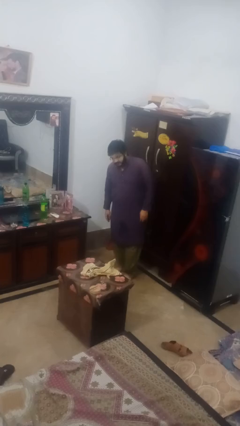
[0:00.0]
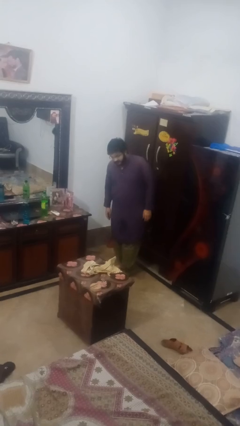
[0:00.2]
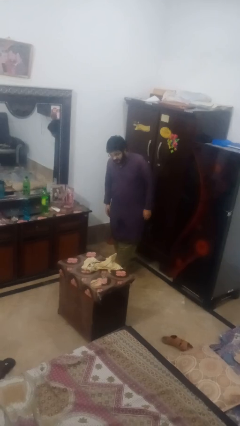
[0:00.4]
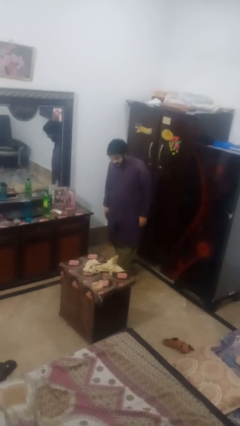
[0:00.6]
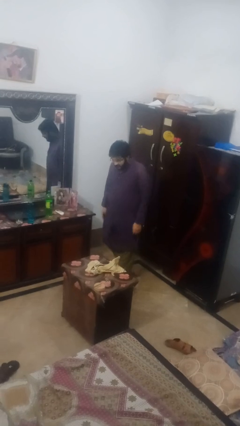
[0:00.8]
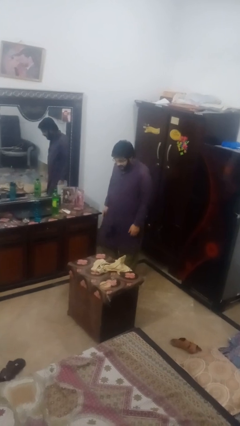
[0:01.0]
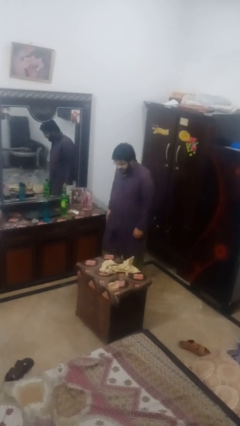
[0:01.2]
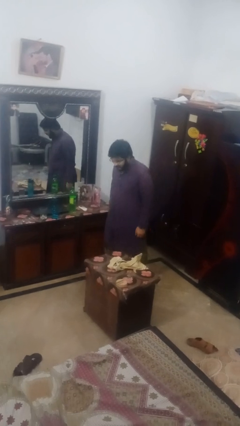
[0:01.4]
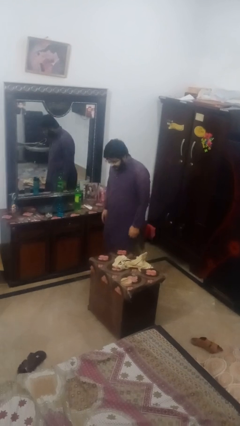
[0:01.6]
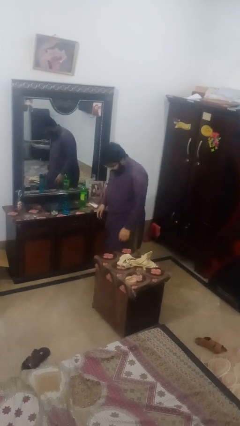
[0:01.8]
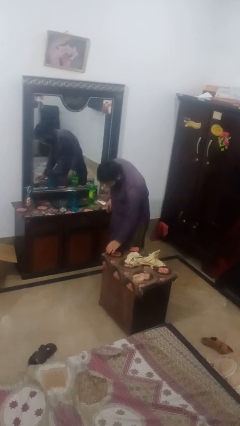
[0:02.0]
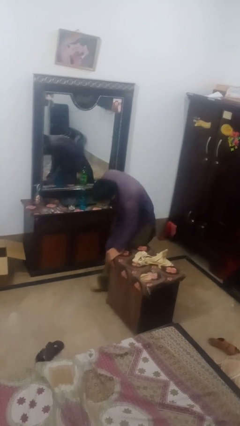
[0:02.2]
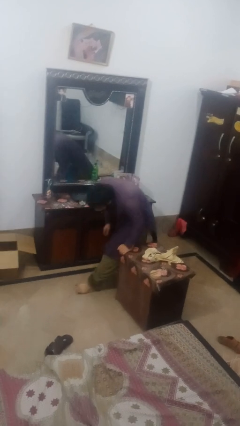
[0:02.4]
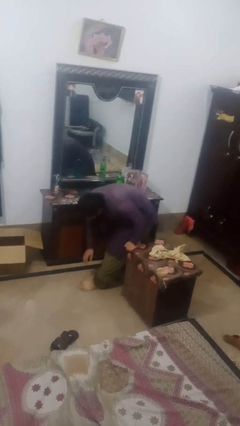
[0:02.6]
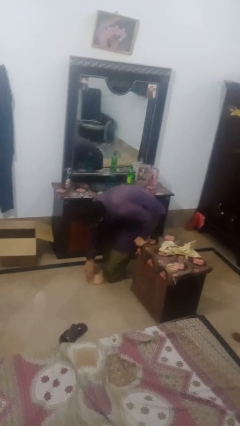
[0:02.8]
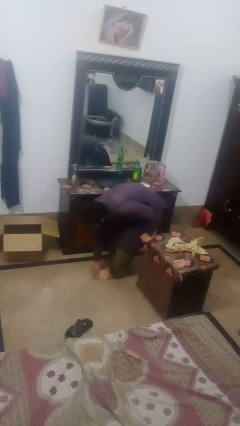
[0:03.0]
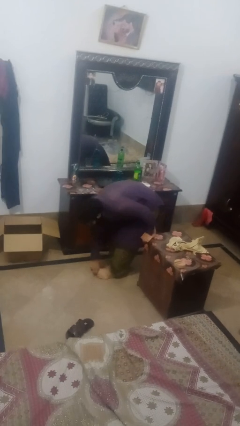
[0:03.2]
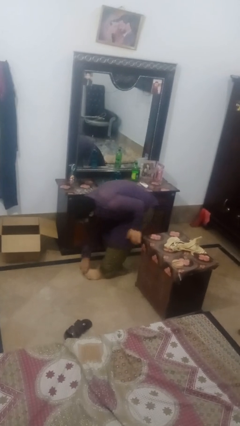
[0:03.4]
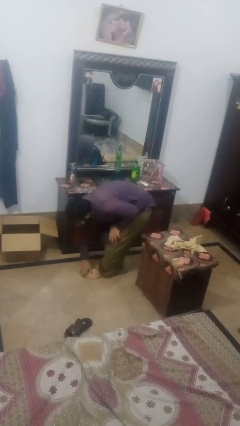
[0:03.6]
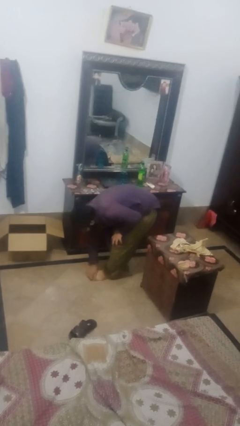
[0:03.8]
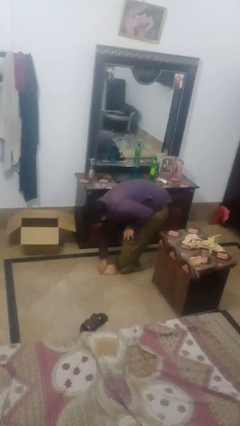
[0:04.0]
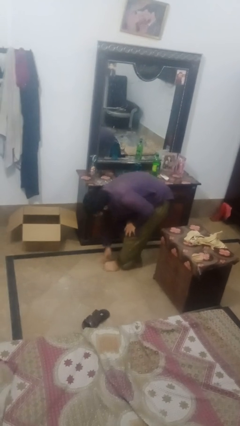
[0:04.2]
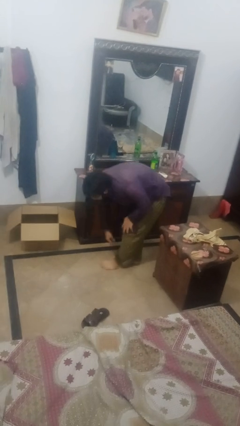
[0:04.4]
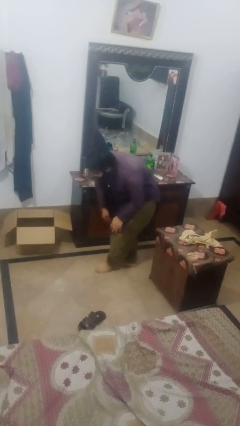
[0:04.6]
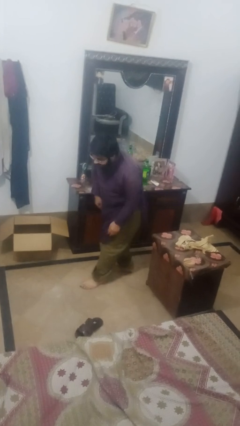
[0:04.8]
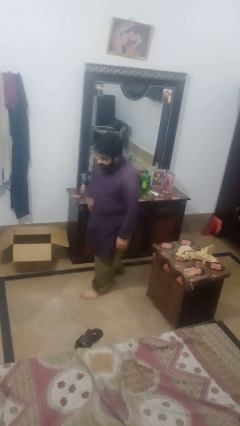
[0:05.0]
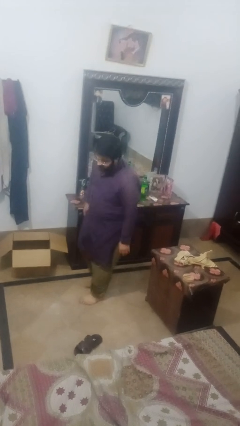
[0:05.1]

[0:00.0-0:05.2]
person bumps into table

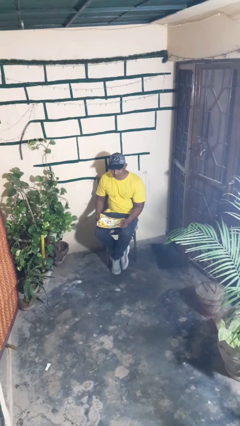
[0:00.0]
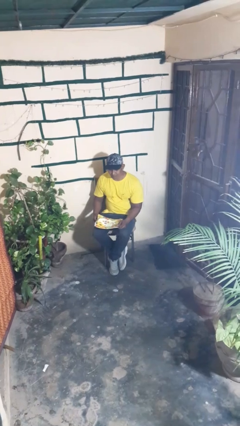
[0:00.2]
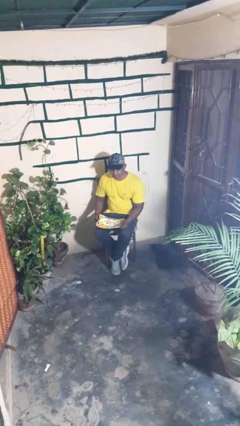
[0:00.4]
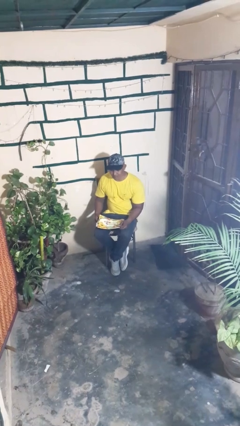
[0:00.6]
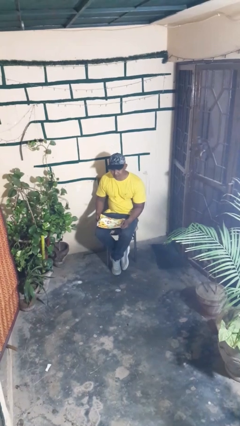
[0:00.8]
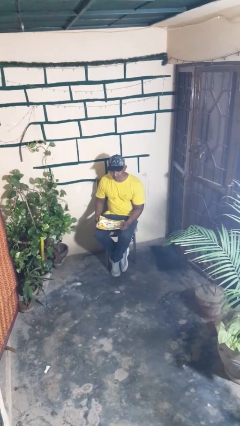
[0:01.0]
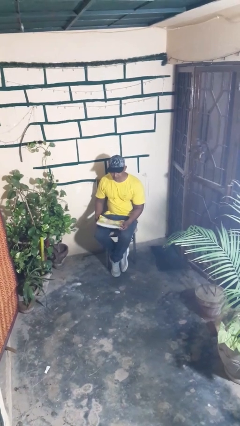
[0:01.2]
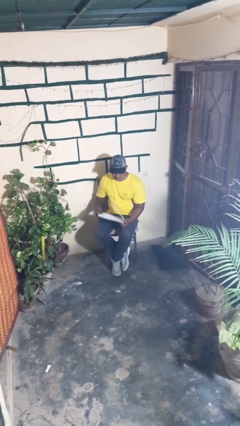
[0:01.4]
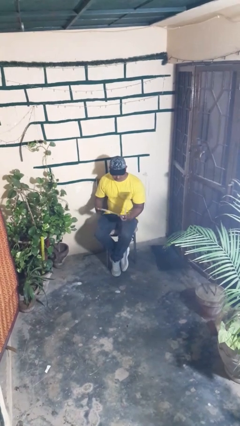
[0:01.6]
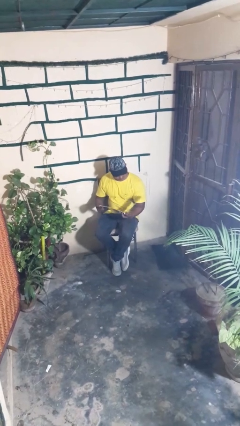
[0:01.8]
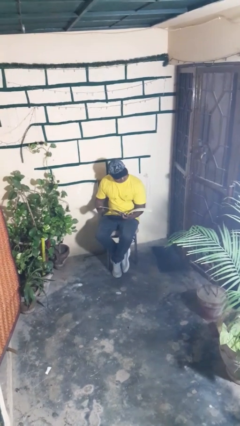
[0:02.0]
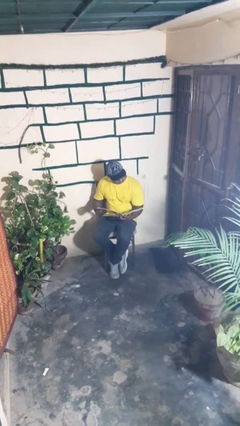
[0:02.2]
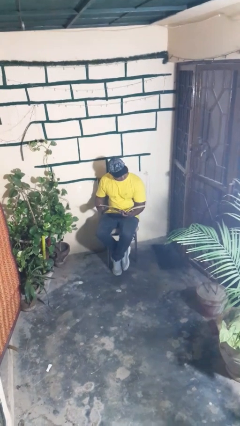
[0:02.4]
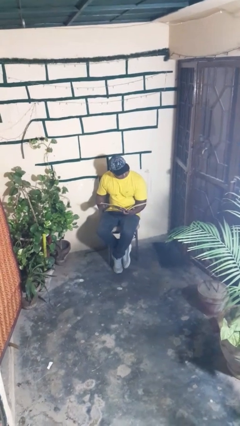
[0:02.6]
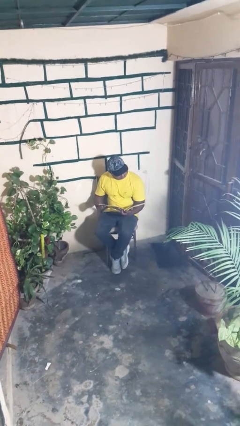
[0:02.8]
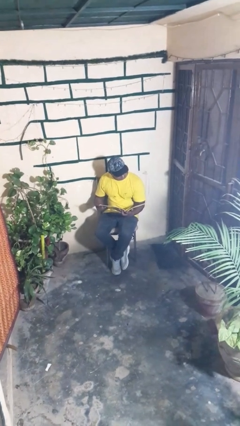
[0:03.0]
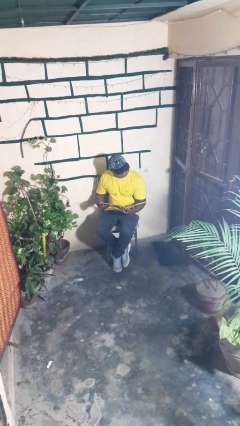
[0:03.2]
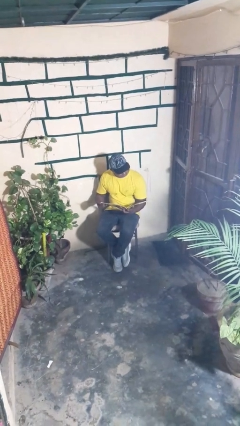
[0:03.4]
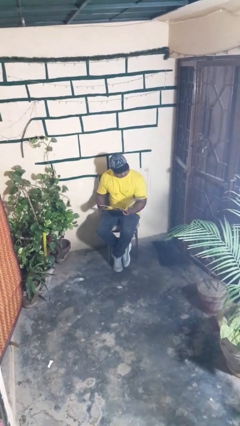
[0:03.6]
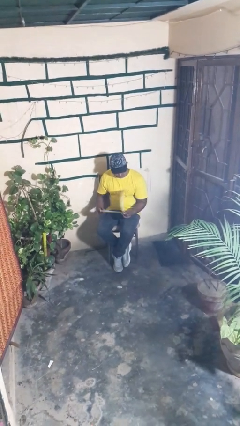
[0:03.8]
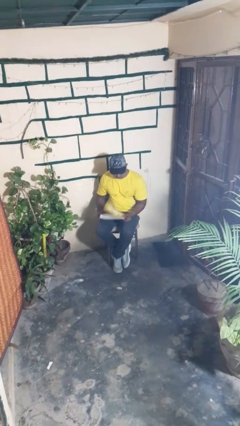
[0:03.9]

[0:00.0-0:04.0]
person reads magazine

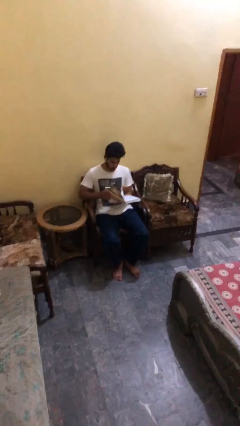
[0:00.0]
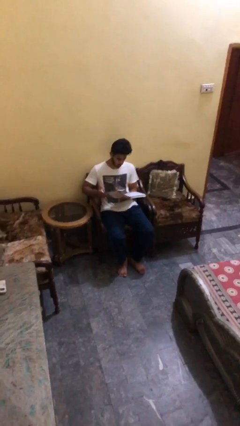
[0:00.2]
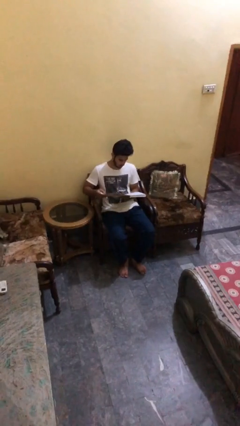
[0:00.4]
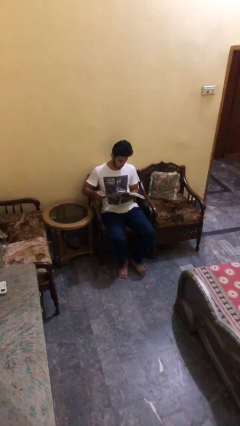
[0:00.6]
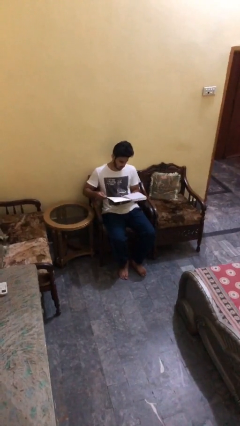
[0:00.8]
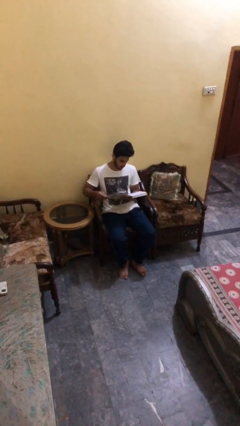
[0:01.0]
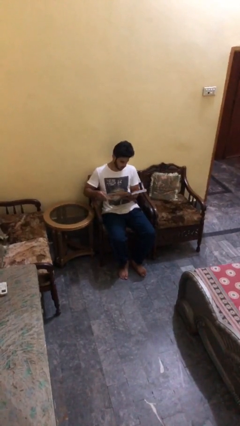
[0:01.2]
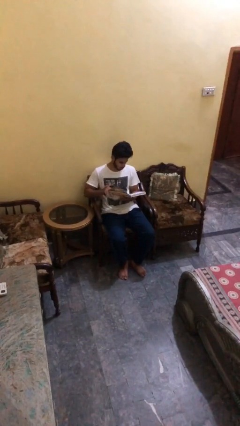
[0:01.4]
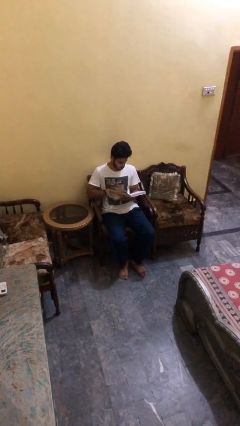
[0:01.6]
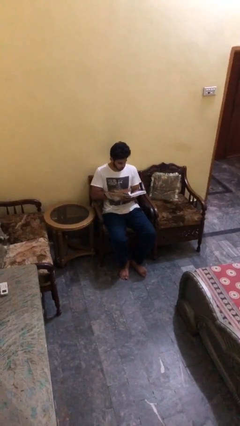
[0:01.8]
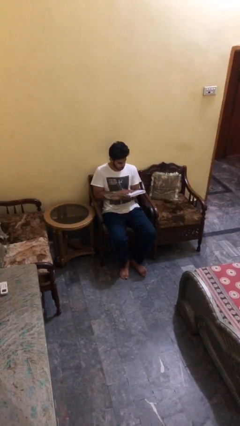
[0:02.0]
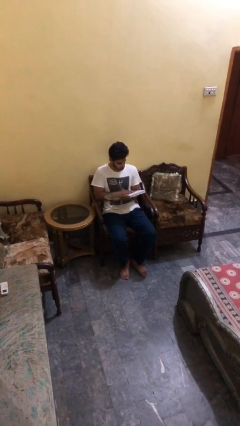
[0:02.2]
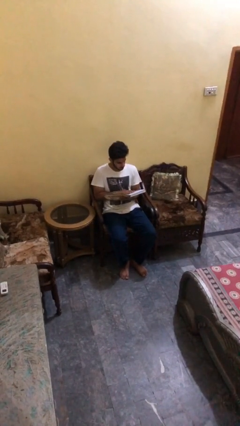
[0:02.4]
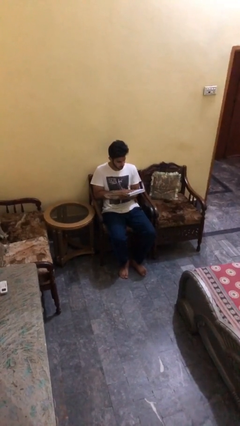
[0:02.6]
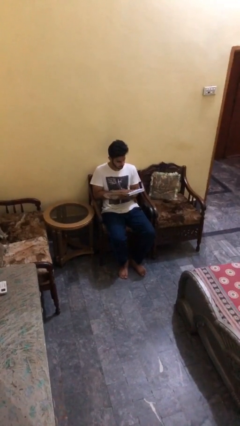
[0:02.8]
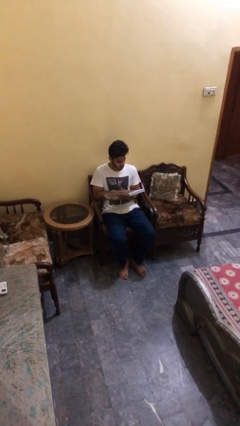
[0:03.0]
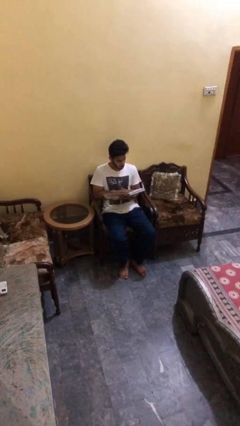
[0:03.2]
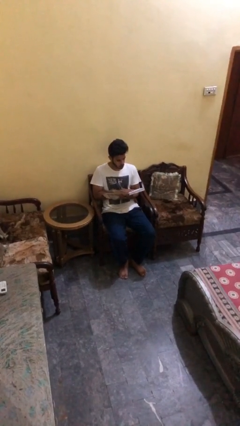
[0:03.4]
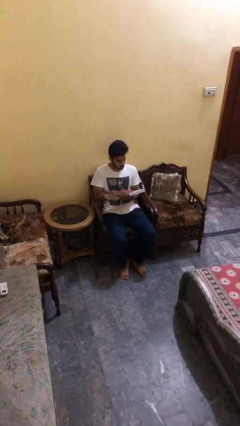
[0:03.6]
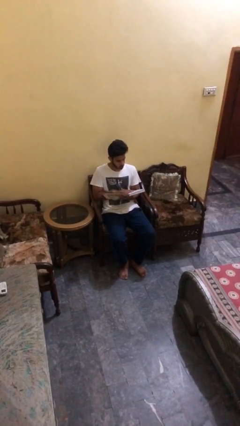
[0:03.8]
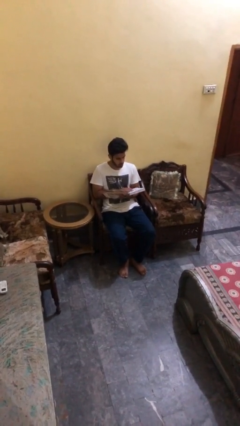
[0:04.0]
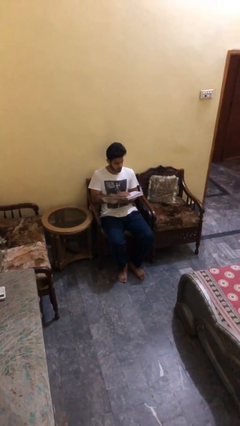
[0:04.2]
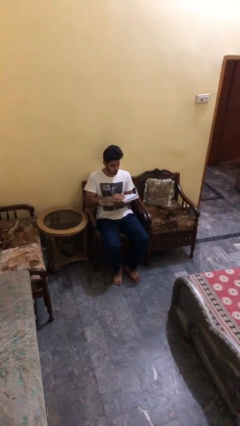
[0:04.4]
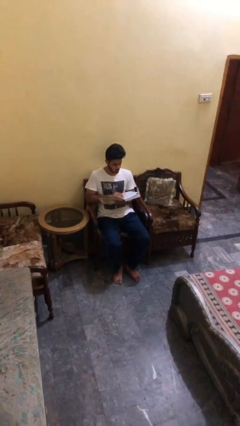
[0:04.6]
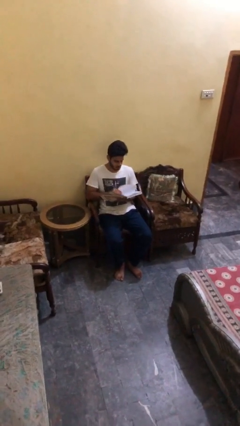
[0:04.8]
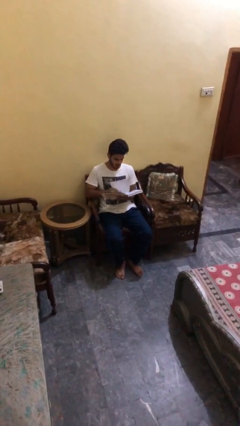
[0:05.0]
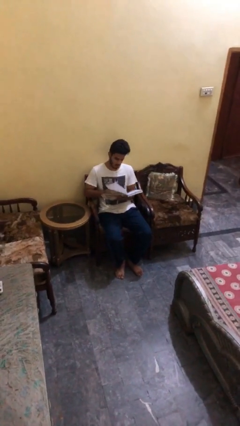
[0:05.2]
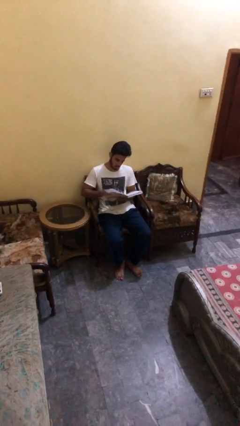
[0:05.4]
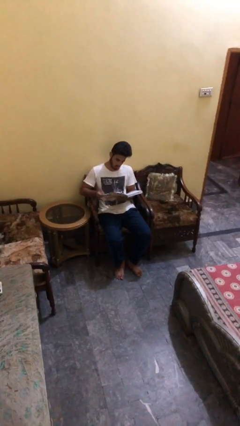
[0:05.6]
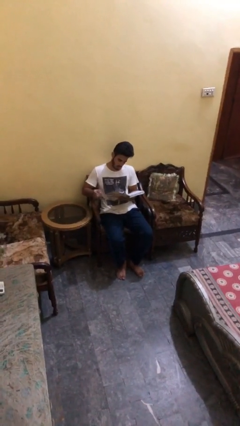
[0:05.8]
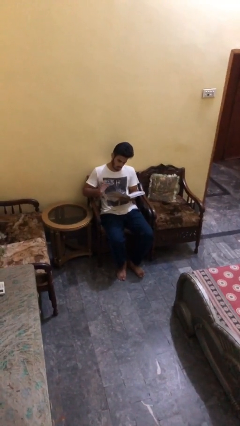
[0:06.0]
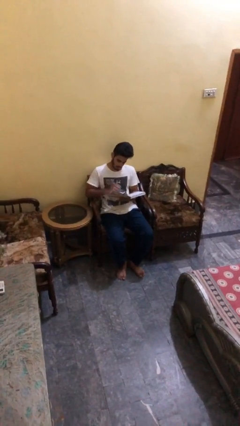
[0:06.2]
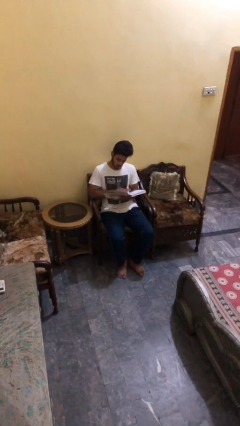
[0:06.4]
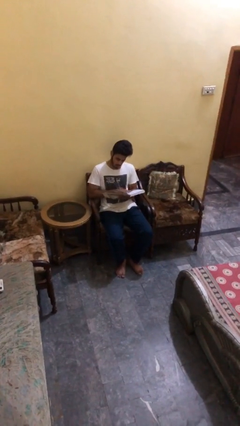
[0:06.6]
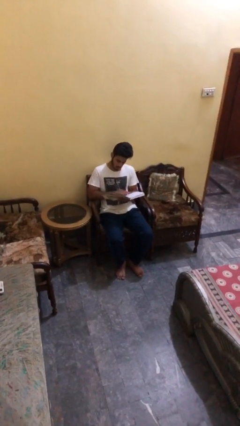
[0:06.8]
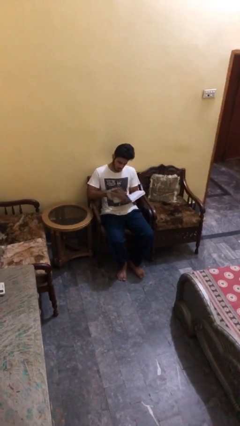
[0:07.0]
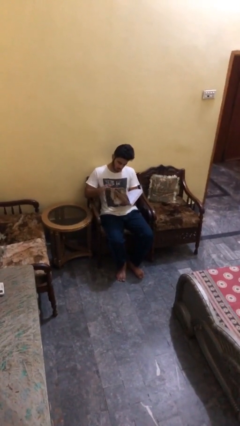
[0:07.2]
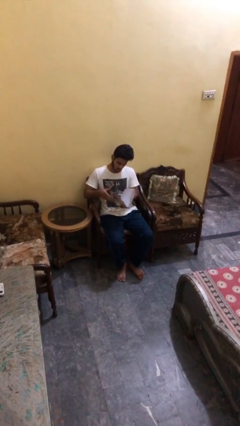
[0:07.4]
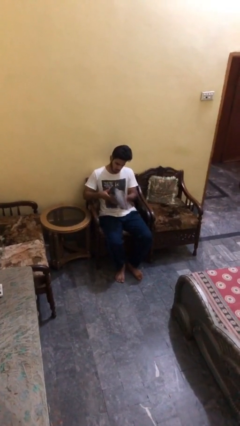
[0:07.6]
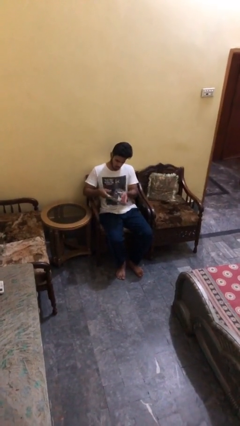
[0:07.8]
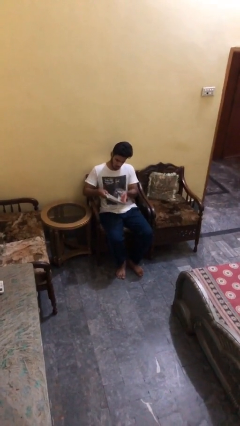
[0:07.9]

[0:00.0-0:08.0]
person reads document

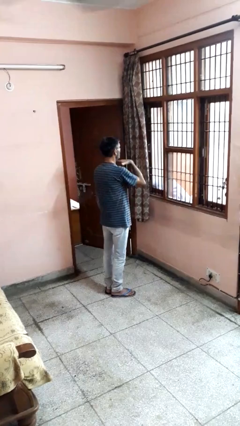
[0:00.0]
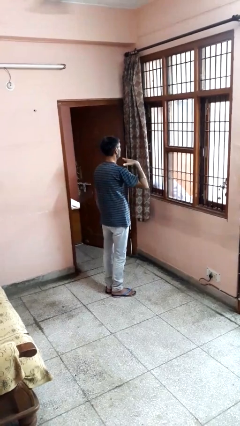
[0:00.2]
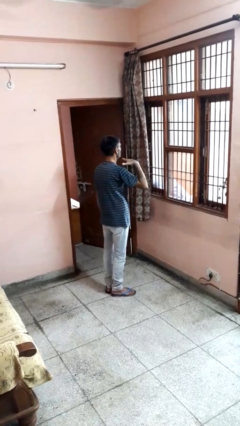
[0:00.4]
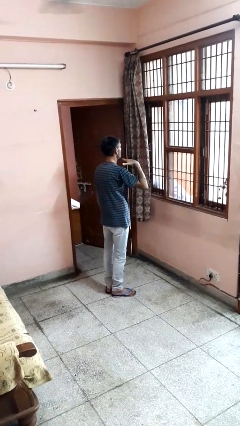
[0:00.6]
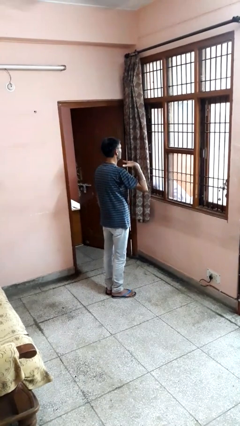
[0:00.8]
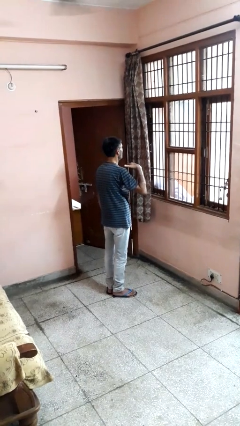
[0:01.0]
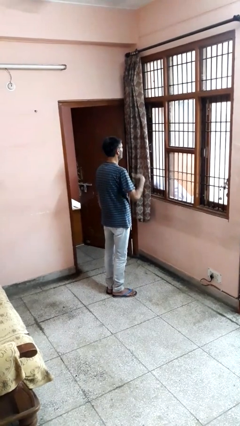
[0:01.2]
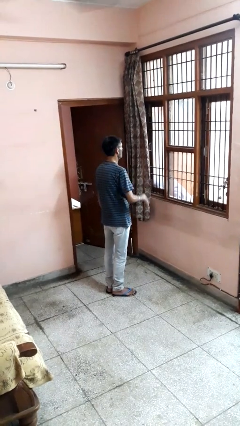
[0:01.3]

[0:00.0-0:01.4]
person gestures cut
